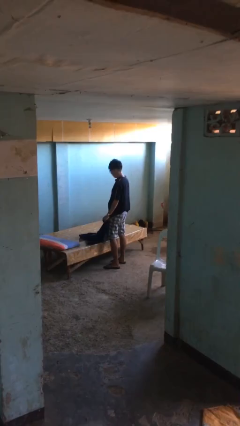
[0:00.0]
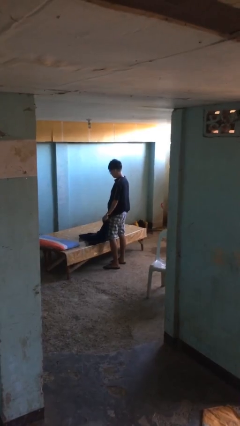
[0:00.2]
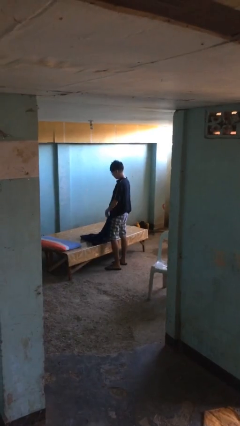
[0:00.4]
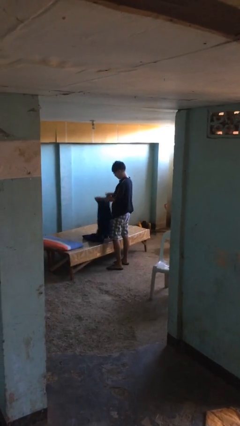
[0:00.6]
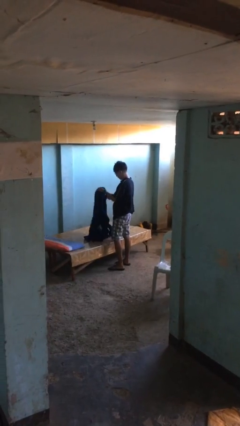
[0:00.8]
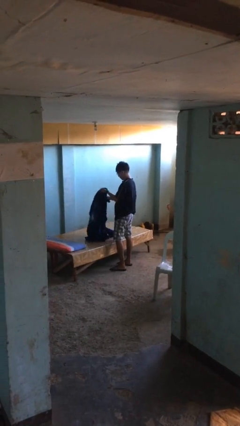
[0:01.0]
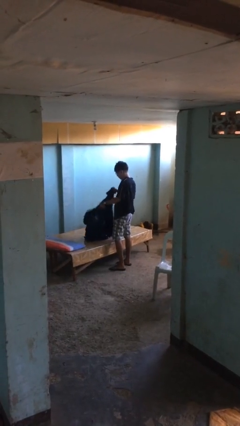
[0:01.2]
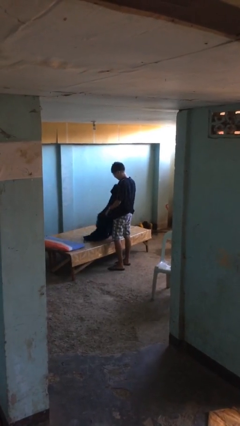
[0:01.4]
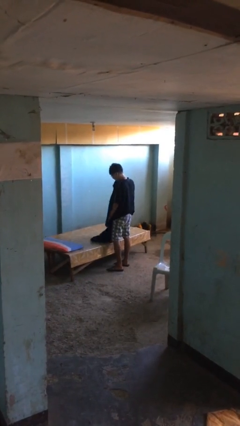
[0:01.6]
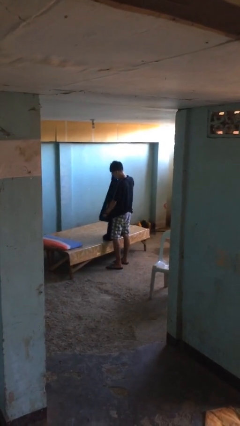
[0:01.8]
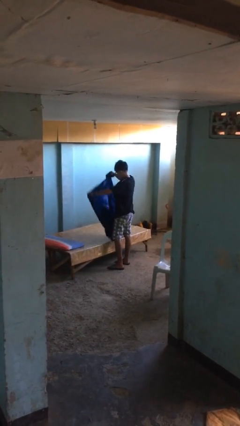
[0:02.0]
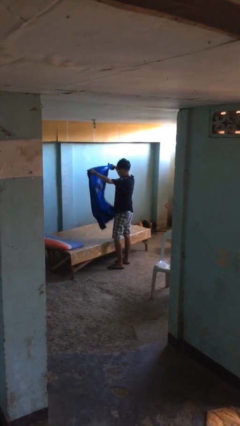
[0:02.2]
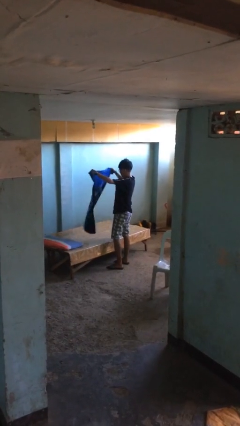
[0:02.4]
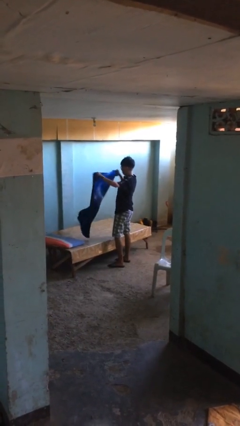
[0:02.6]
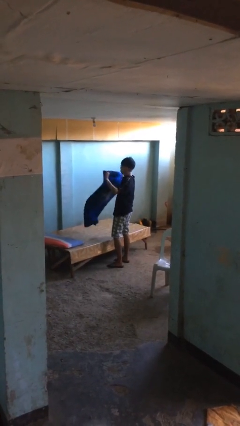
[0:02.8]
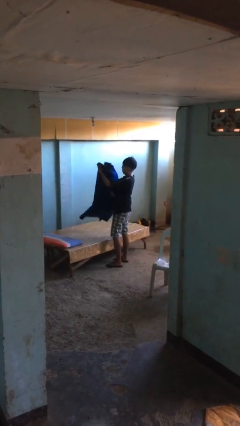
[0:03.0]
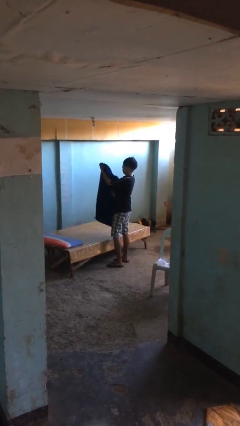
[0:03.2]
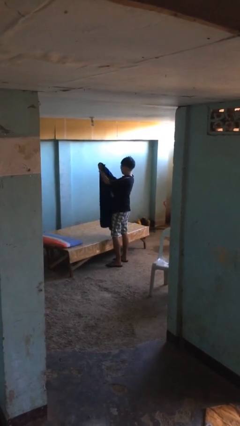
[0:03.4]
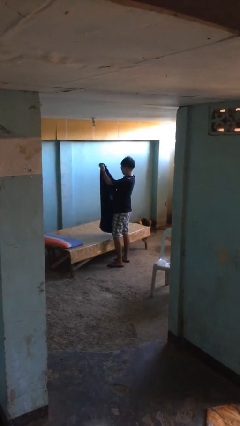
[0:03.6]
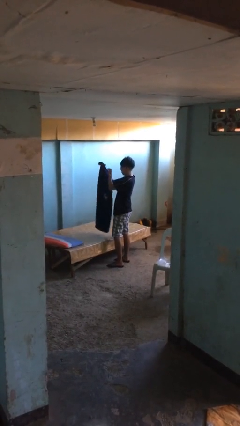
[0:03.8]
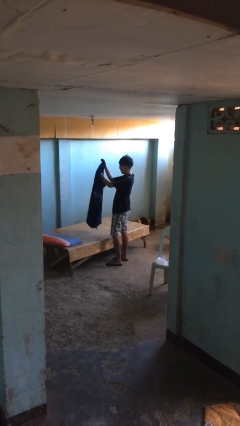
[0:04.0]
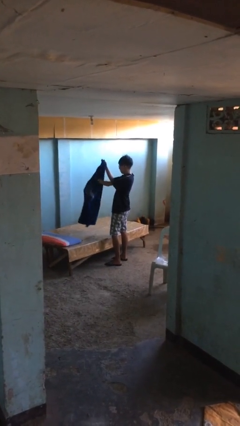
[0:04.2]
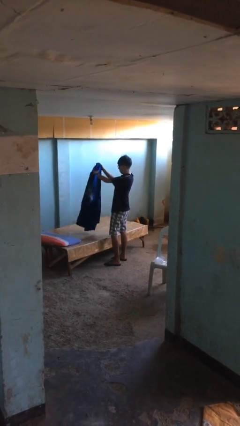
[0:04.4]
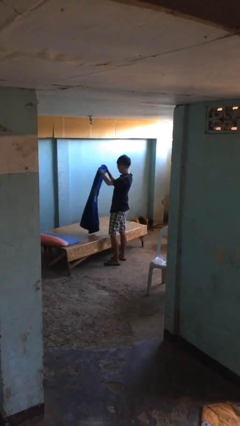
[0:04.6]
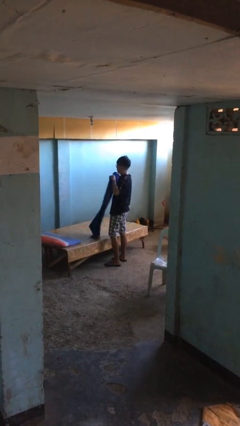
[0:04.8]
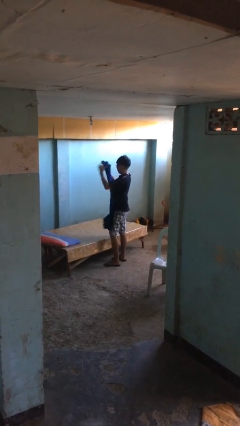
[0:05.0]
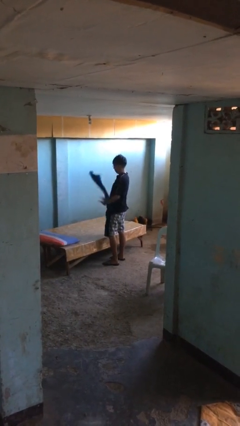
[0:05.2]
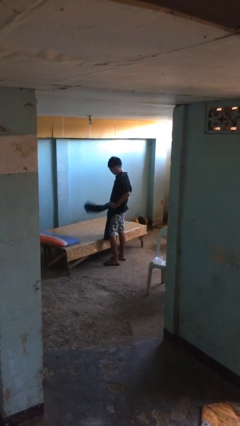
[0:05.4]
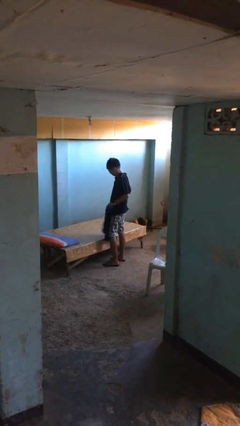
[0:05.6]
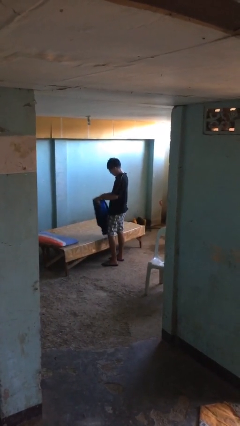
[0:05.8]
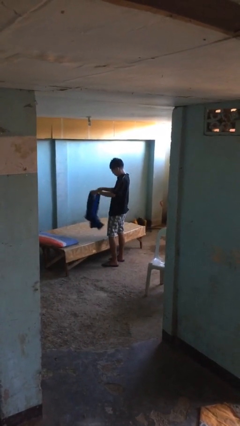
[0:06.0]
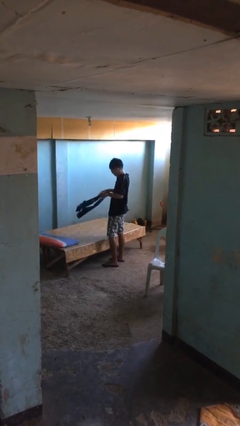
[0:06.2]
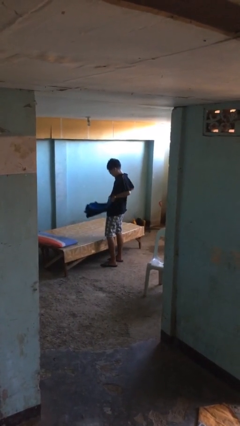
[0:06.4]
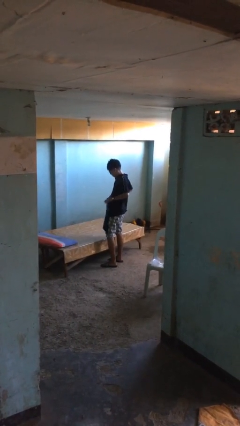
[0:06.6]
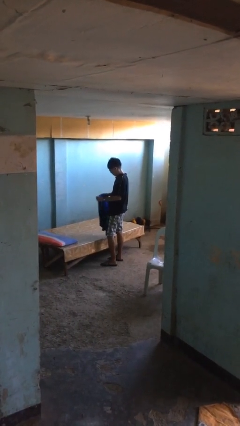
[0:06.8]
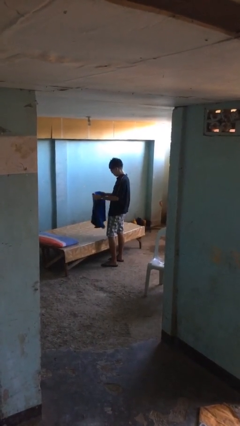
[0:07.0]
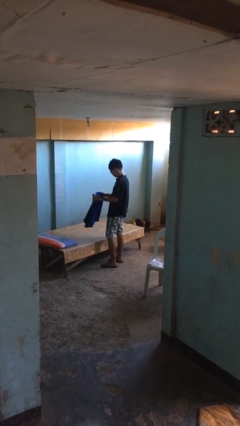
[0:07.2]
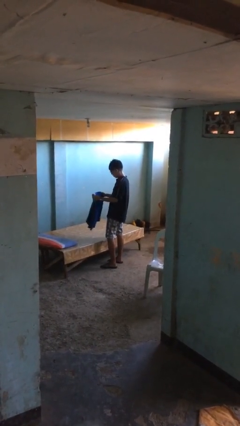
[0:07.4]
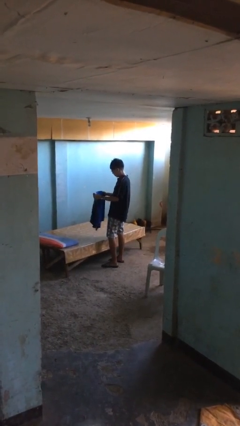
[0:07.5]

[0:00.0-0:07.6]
person folds blanket

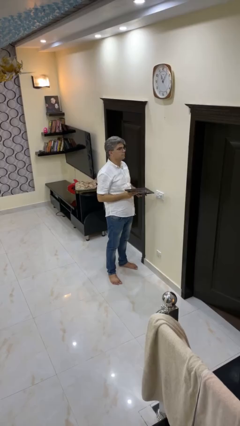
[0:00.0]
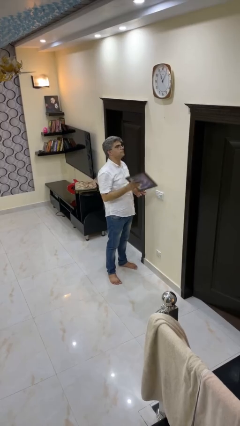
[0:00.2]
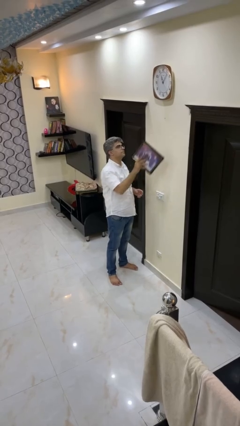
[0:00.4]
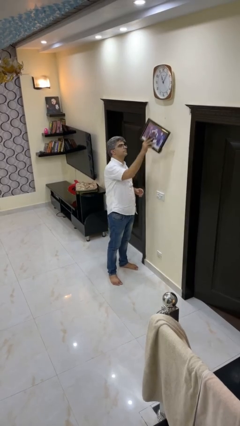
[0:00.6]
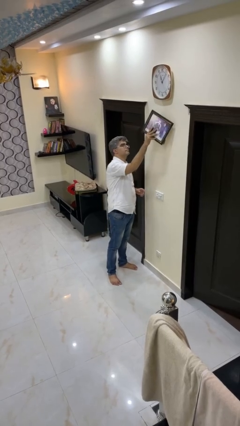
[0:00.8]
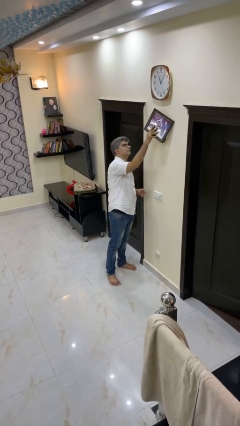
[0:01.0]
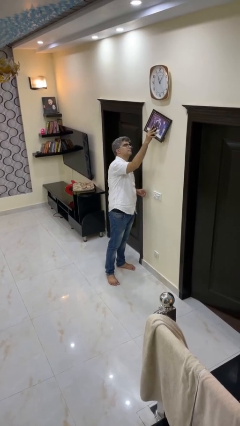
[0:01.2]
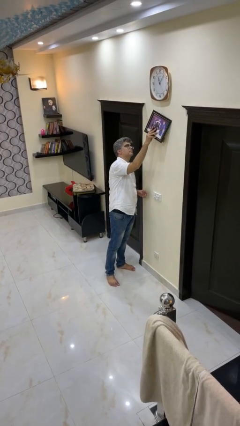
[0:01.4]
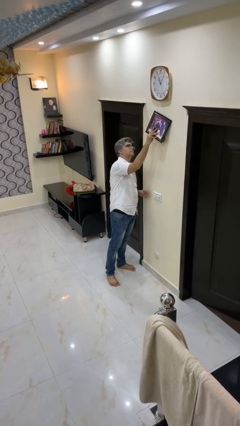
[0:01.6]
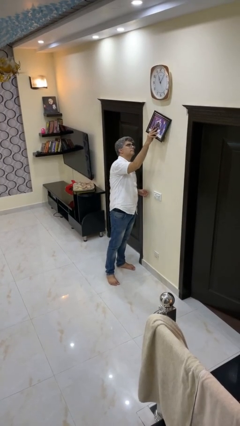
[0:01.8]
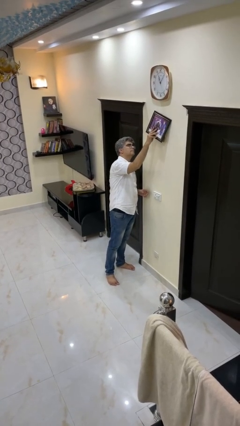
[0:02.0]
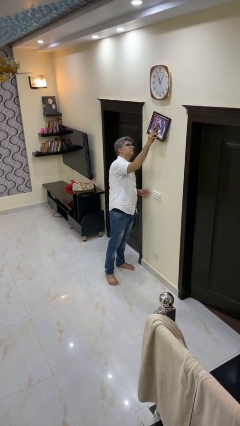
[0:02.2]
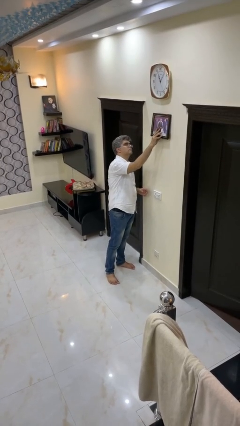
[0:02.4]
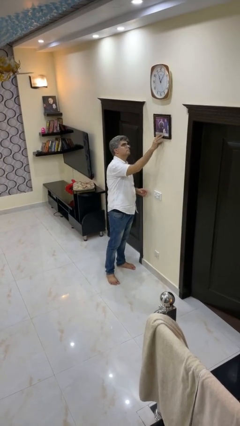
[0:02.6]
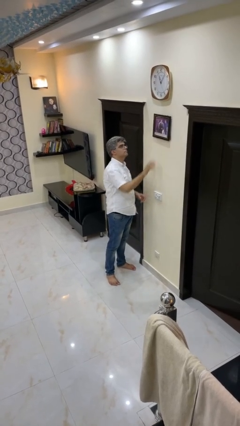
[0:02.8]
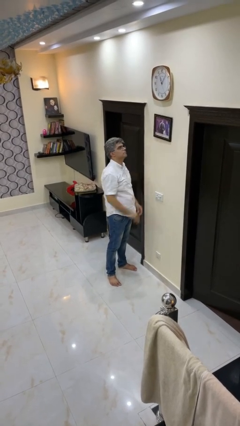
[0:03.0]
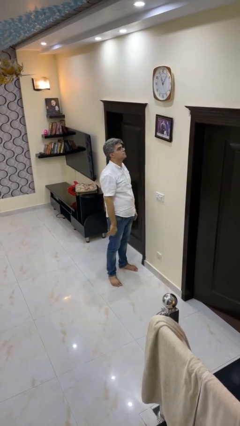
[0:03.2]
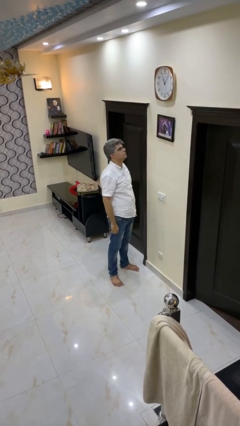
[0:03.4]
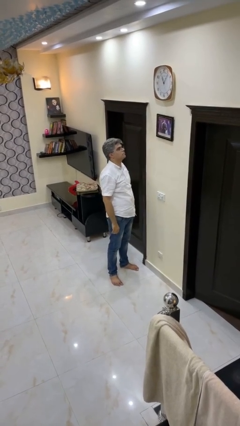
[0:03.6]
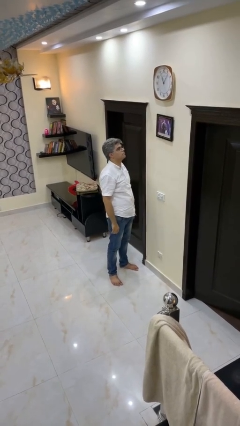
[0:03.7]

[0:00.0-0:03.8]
person puts up picture frame

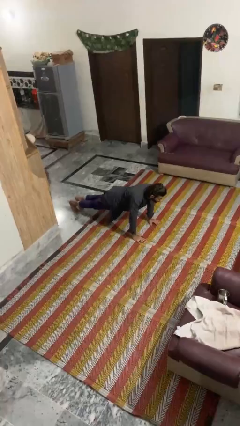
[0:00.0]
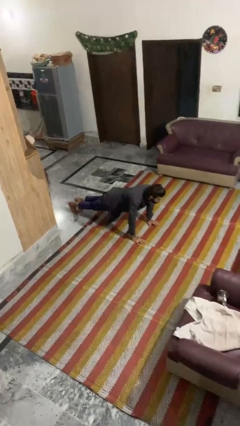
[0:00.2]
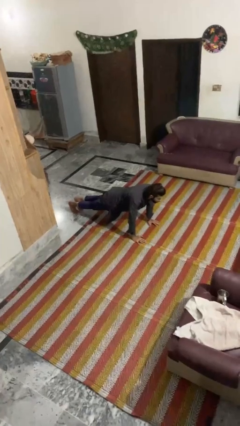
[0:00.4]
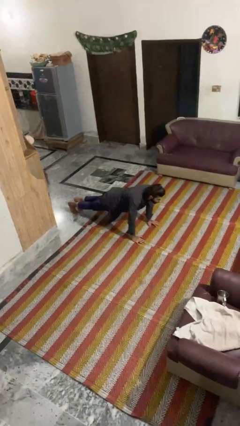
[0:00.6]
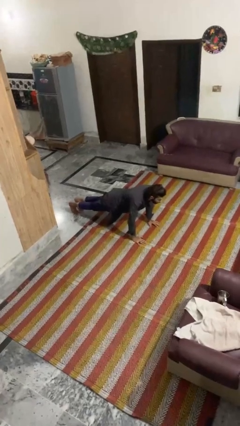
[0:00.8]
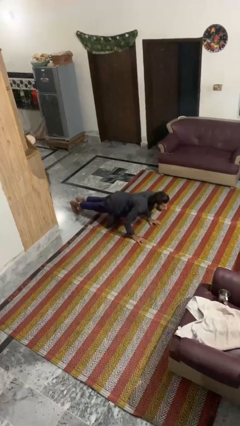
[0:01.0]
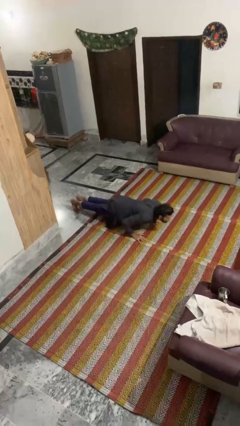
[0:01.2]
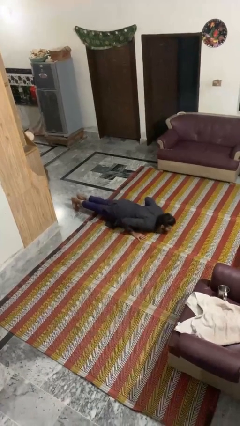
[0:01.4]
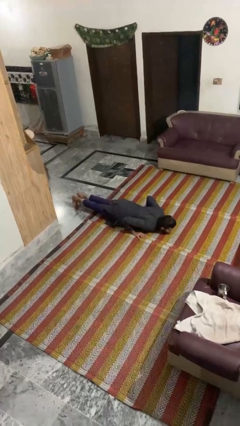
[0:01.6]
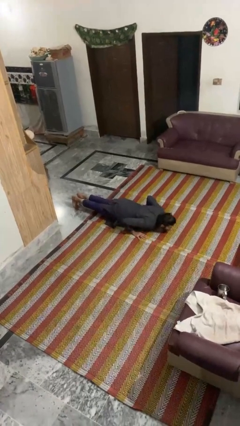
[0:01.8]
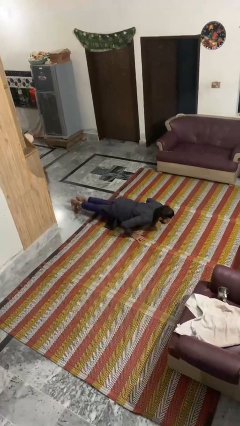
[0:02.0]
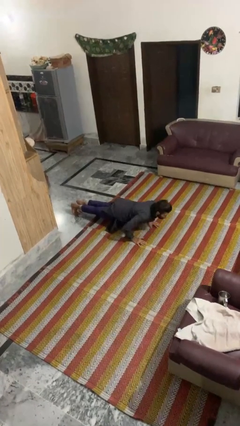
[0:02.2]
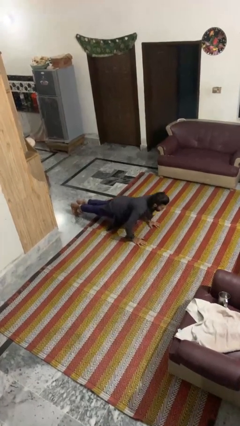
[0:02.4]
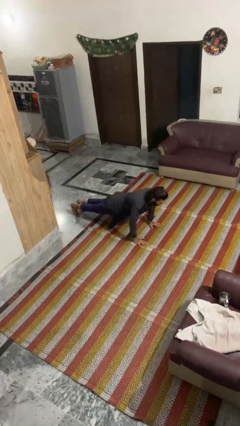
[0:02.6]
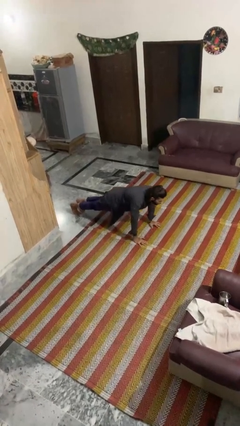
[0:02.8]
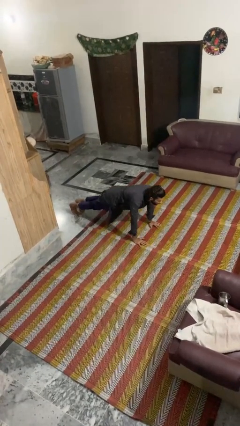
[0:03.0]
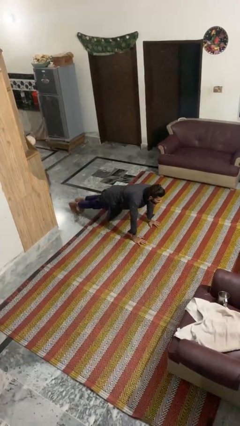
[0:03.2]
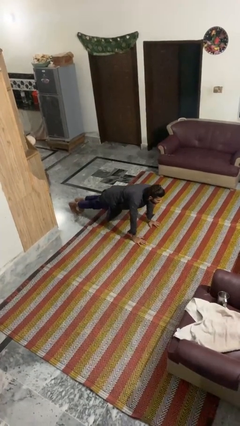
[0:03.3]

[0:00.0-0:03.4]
person exercises with pushup

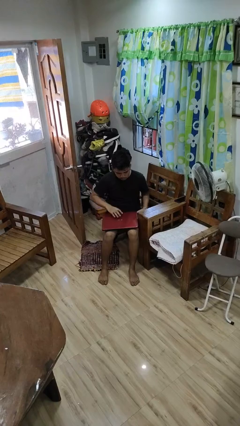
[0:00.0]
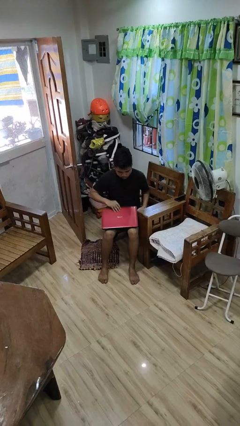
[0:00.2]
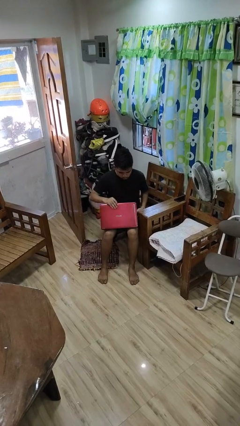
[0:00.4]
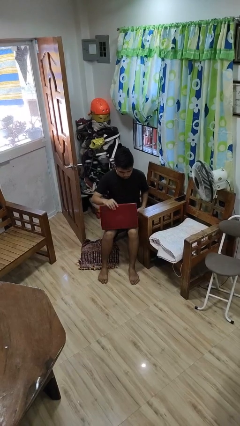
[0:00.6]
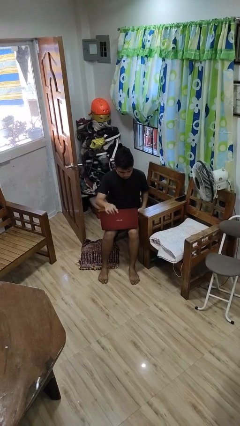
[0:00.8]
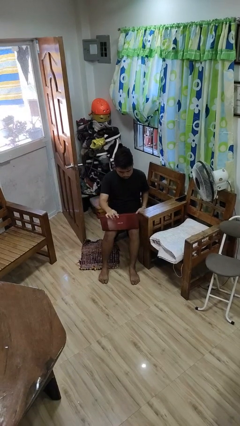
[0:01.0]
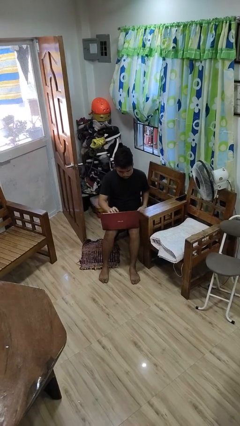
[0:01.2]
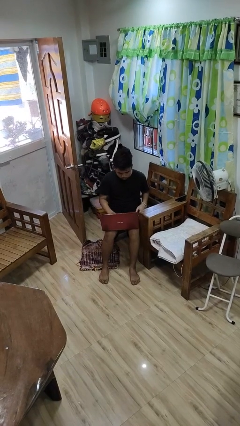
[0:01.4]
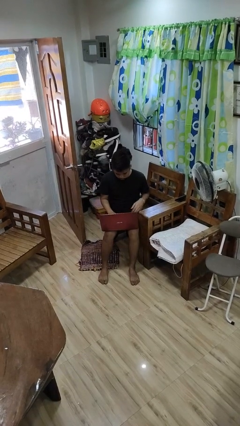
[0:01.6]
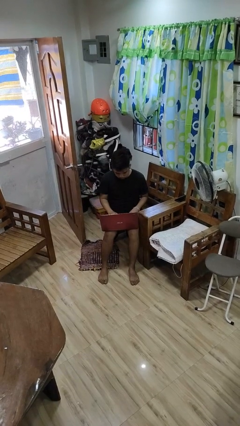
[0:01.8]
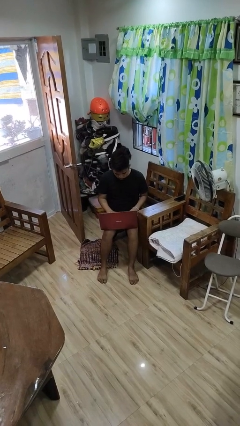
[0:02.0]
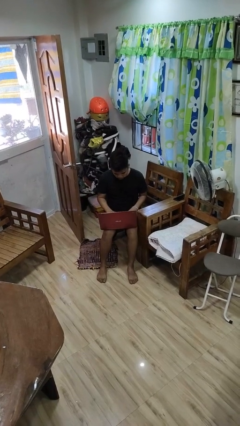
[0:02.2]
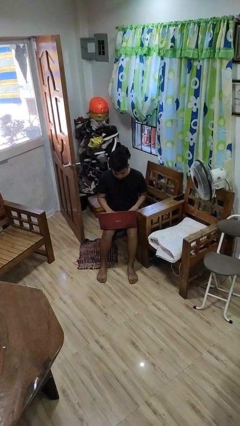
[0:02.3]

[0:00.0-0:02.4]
person opens laptop

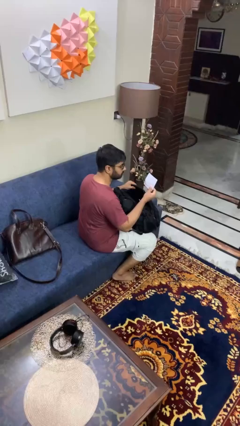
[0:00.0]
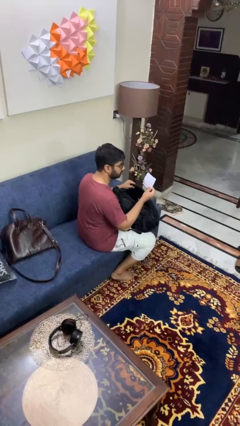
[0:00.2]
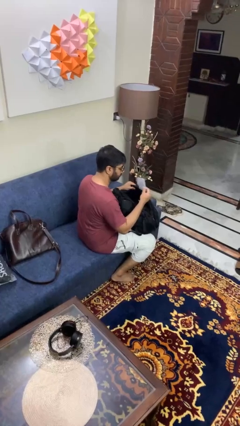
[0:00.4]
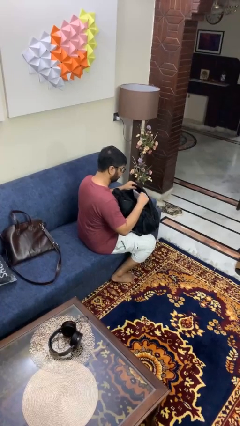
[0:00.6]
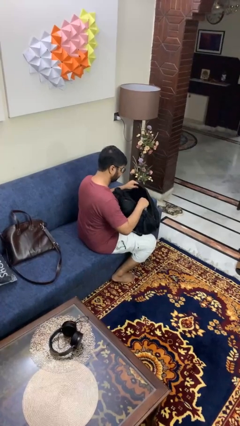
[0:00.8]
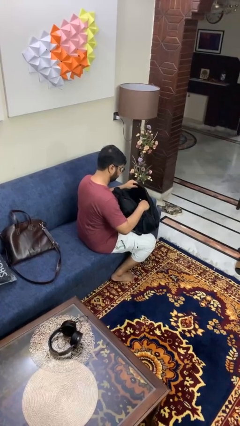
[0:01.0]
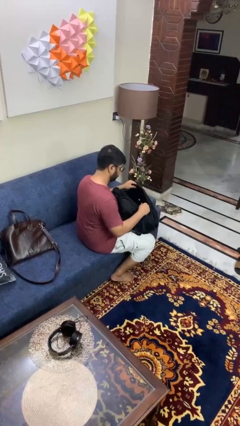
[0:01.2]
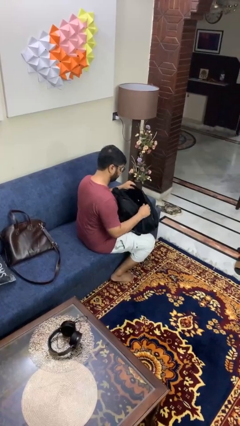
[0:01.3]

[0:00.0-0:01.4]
person puts object into backpack
